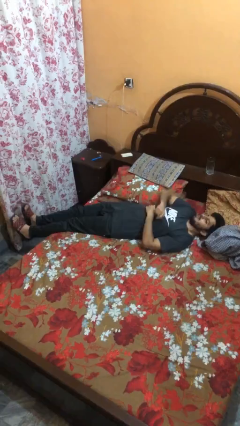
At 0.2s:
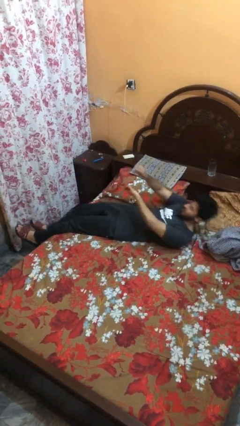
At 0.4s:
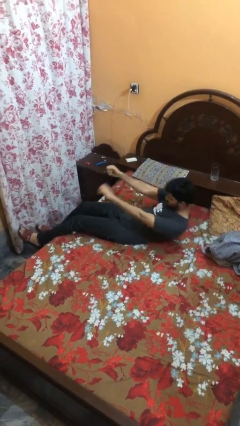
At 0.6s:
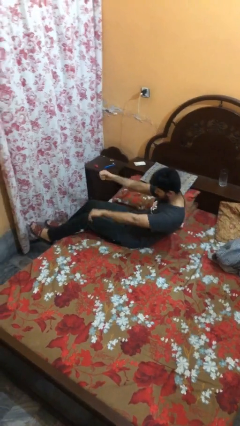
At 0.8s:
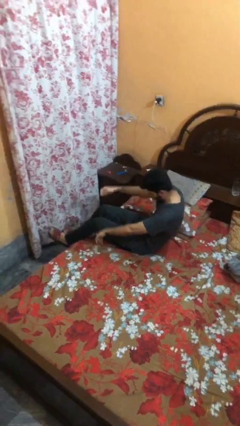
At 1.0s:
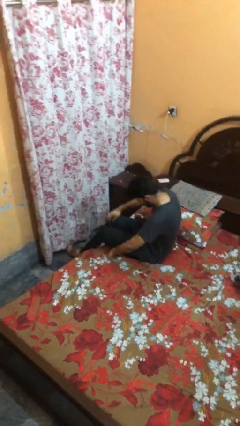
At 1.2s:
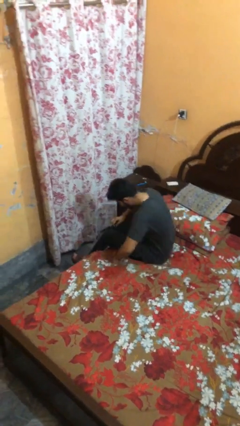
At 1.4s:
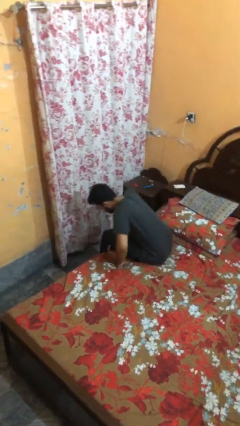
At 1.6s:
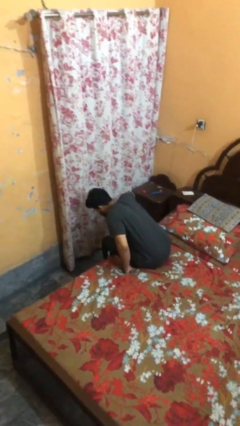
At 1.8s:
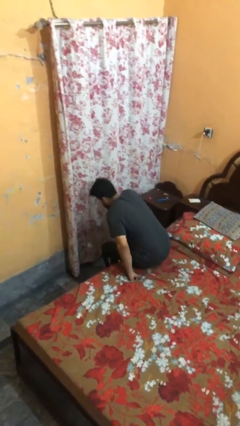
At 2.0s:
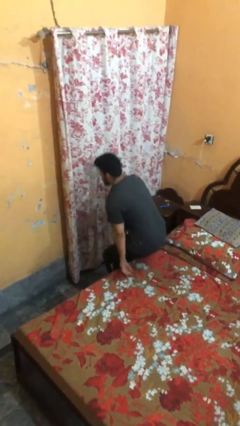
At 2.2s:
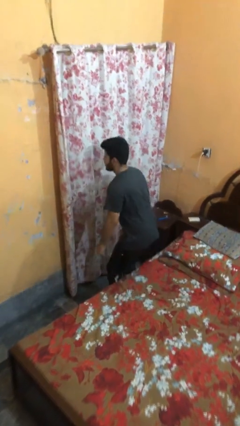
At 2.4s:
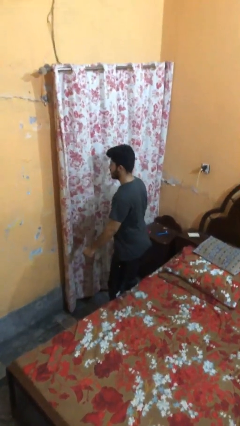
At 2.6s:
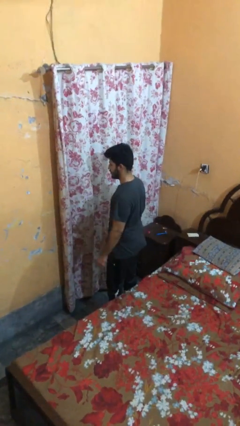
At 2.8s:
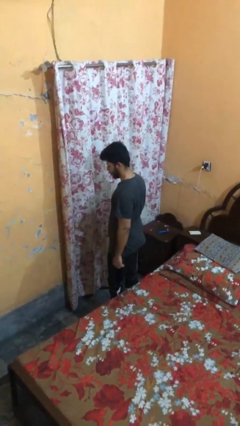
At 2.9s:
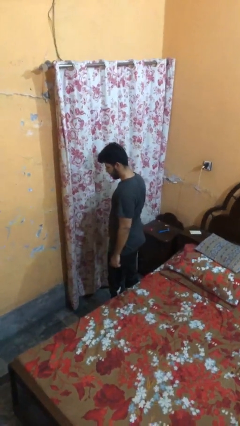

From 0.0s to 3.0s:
person stands up

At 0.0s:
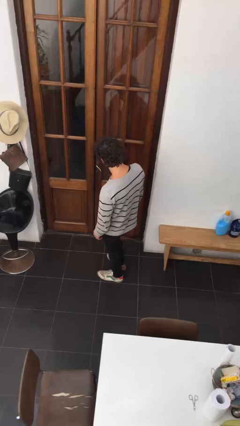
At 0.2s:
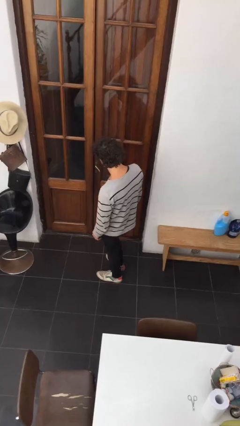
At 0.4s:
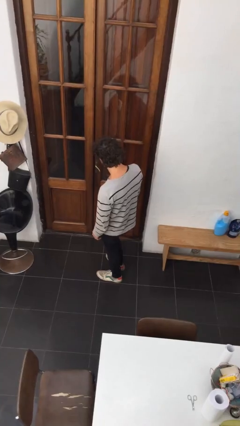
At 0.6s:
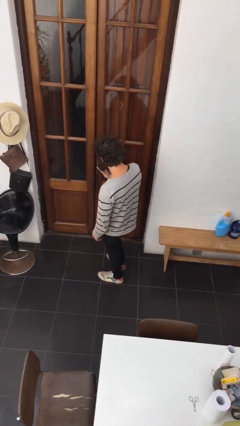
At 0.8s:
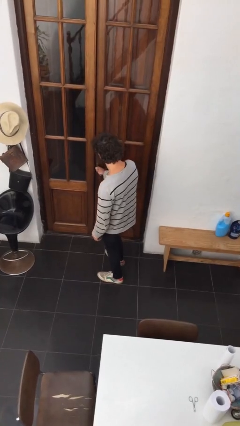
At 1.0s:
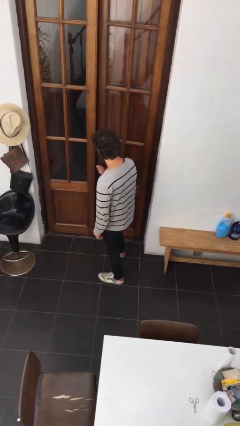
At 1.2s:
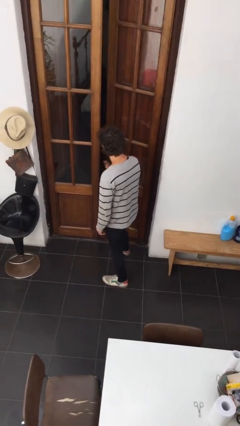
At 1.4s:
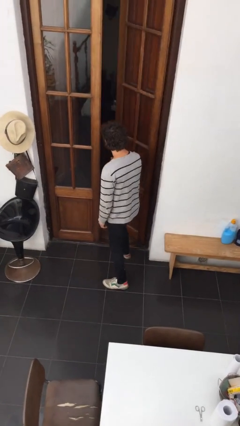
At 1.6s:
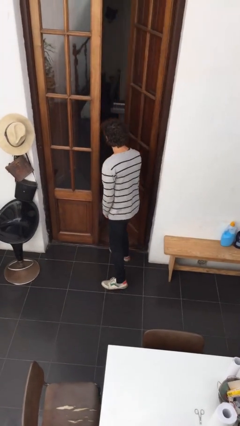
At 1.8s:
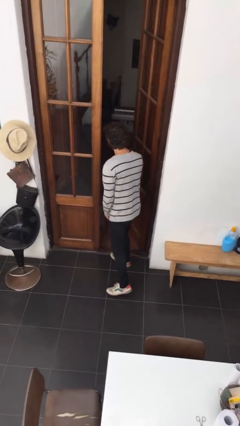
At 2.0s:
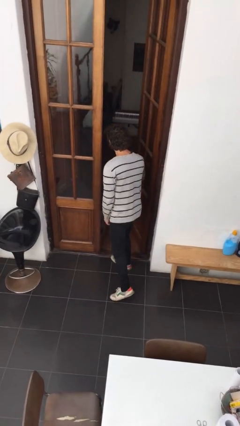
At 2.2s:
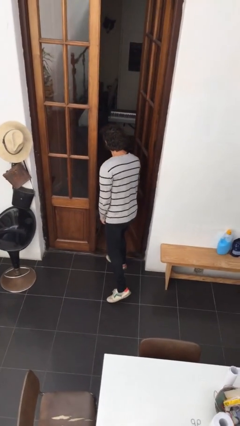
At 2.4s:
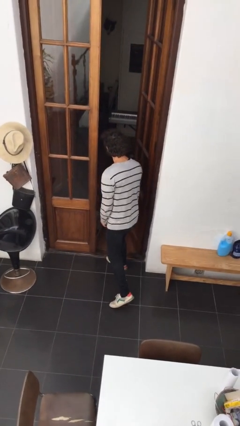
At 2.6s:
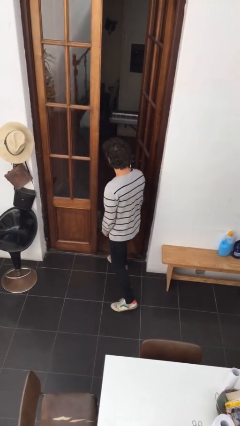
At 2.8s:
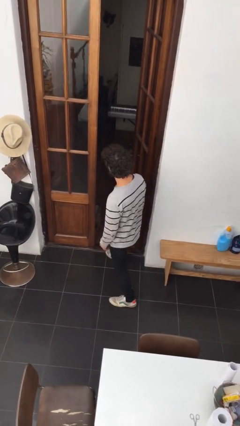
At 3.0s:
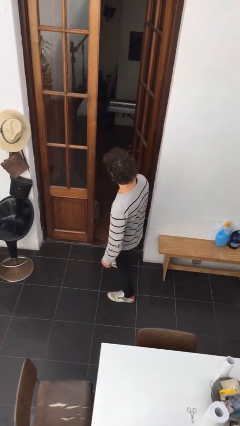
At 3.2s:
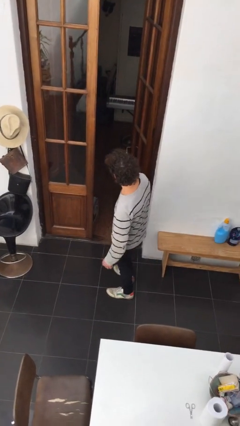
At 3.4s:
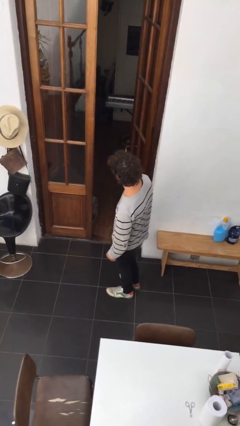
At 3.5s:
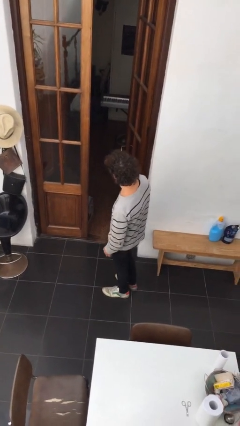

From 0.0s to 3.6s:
person opens facility door

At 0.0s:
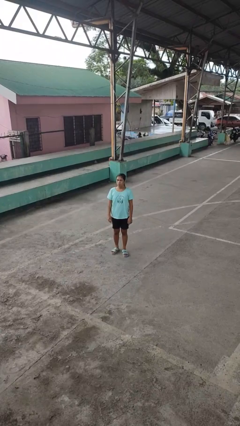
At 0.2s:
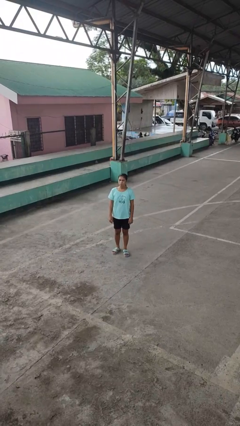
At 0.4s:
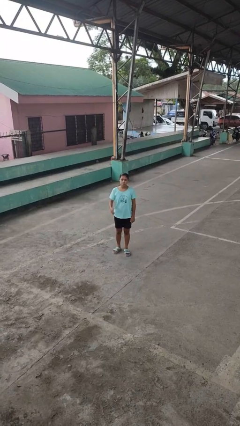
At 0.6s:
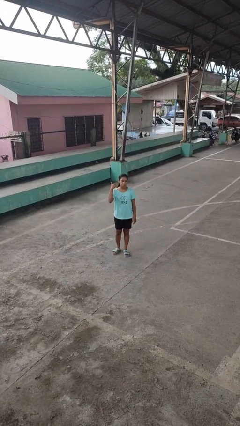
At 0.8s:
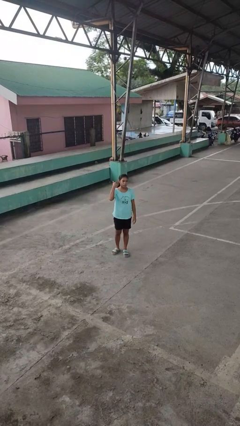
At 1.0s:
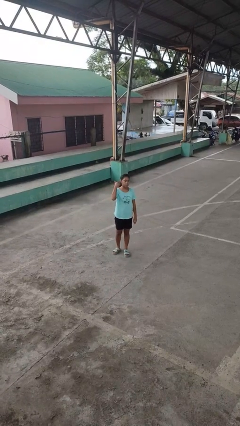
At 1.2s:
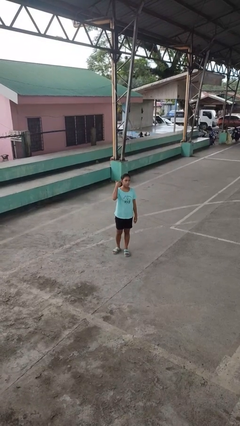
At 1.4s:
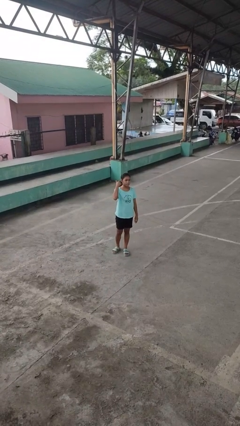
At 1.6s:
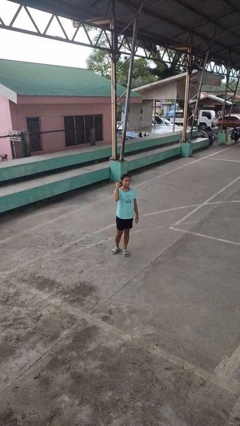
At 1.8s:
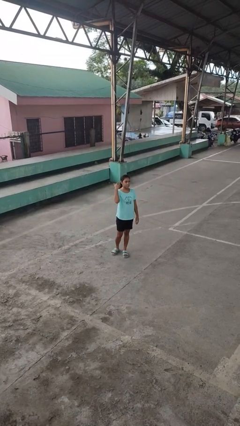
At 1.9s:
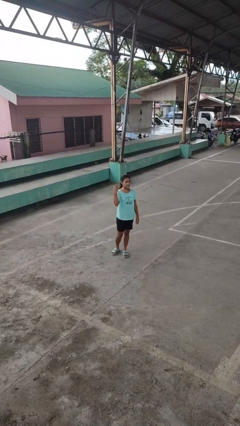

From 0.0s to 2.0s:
person gestures listen closely

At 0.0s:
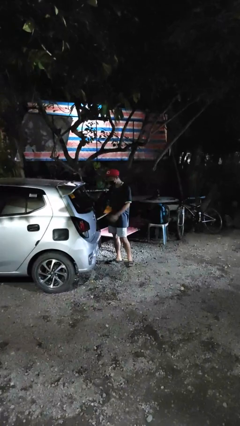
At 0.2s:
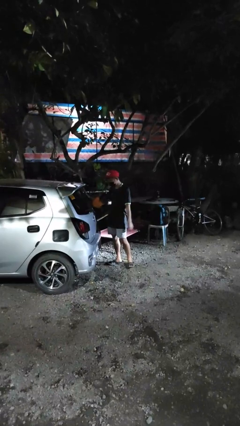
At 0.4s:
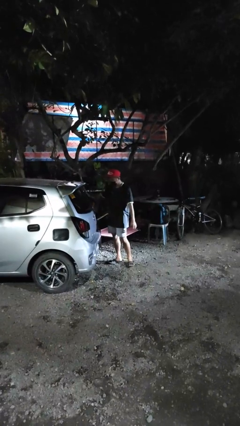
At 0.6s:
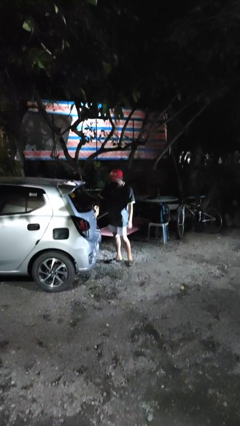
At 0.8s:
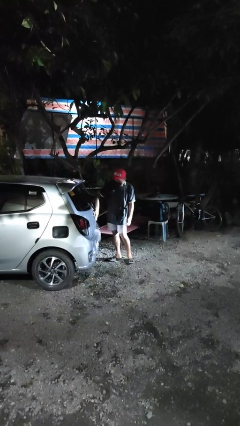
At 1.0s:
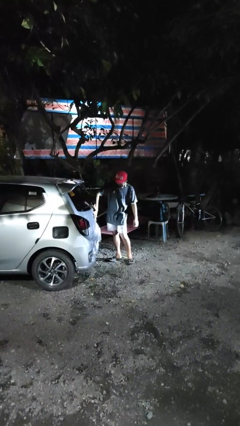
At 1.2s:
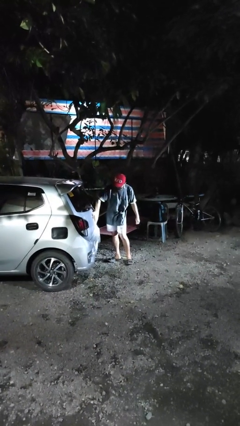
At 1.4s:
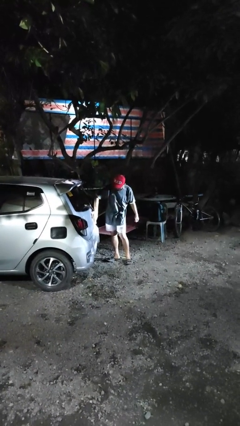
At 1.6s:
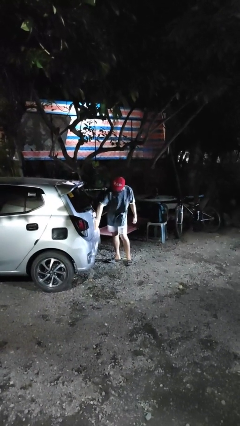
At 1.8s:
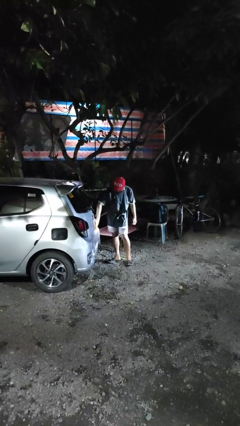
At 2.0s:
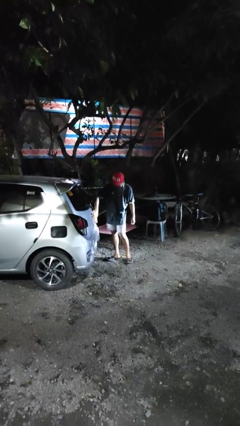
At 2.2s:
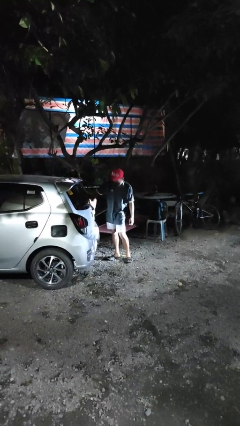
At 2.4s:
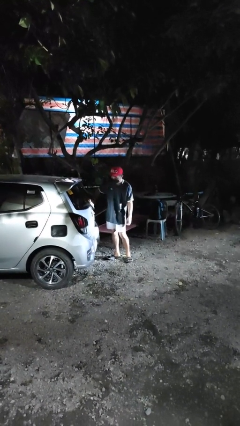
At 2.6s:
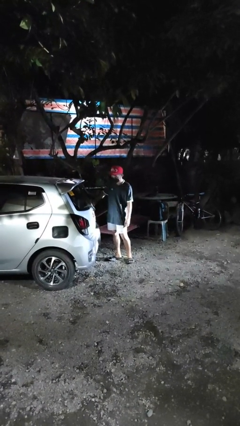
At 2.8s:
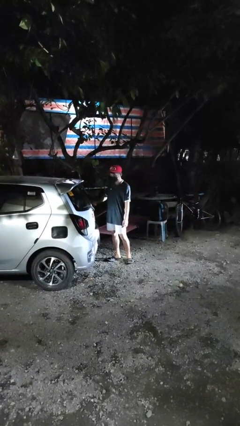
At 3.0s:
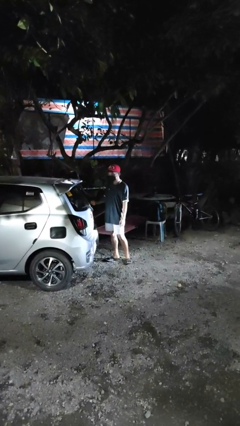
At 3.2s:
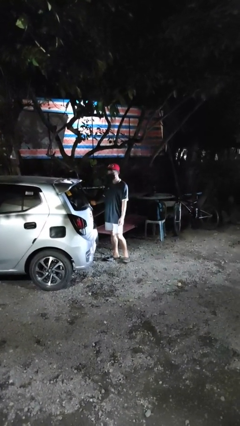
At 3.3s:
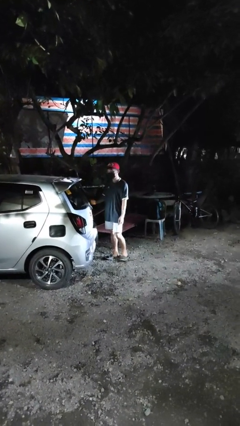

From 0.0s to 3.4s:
person polishes car with rag

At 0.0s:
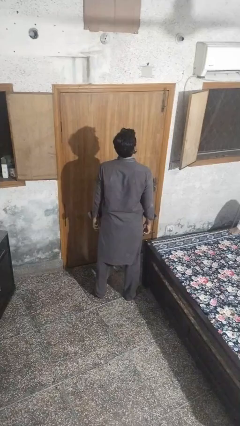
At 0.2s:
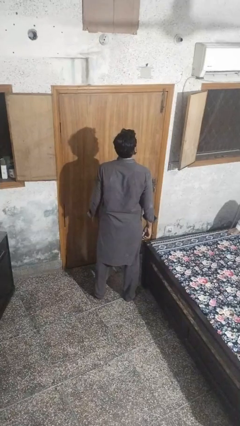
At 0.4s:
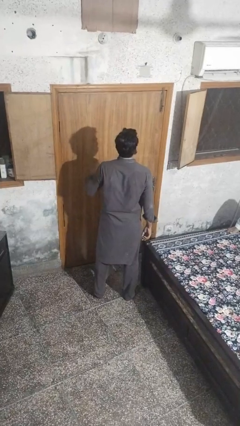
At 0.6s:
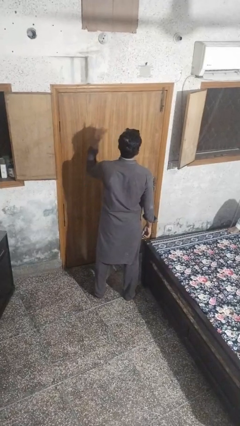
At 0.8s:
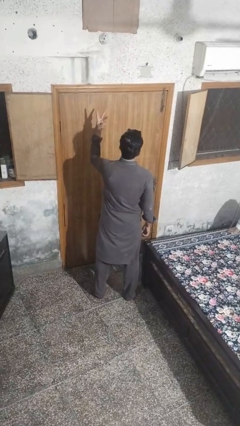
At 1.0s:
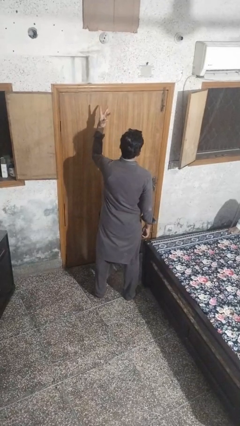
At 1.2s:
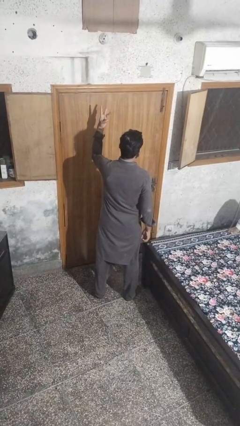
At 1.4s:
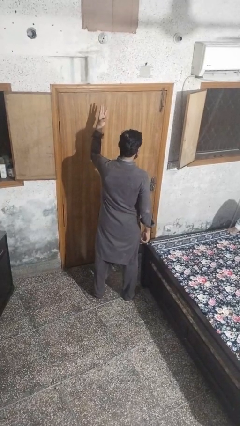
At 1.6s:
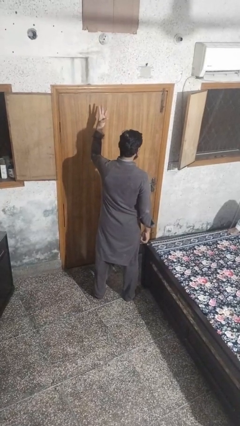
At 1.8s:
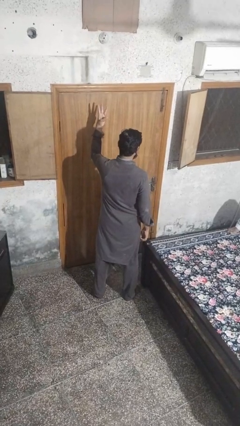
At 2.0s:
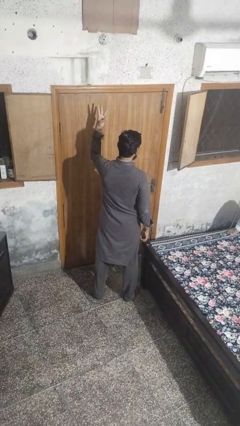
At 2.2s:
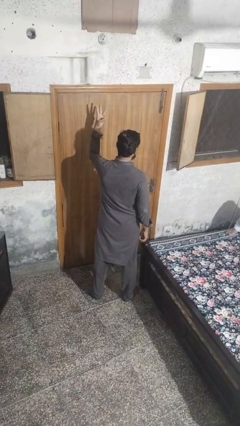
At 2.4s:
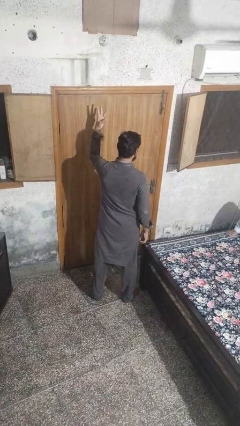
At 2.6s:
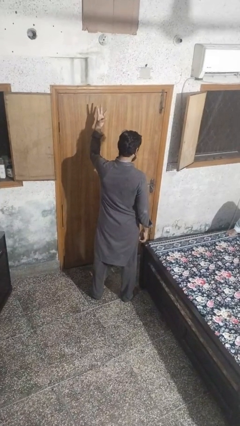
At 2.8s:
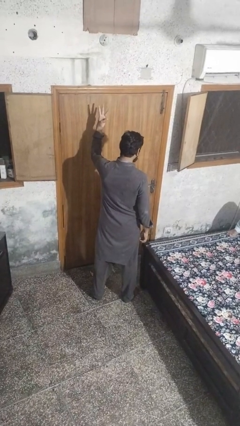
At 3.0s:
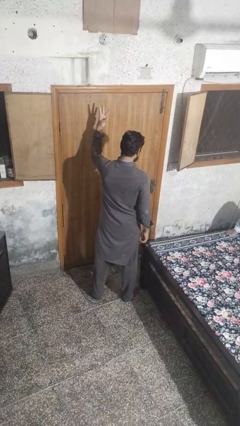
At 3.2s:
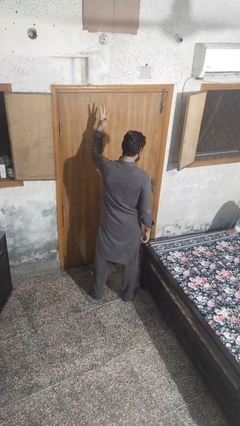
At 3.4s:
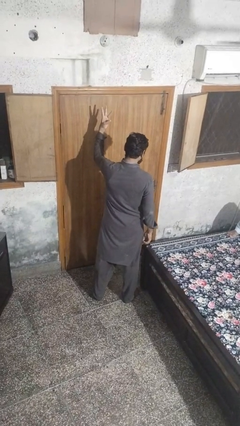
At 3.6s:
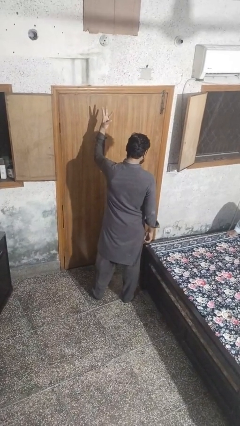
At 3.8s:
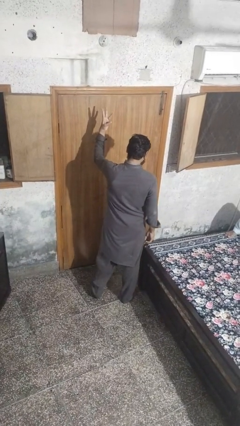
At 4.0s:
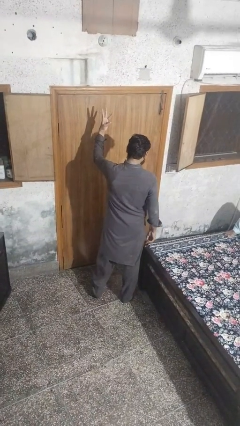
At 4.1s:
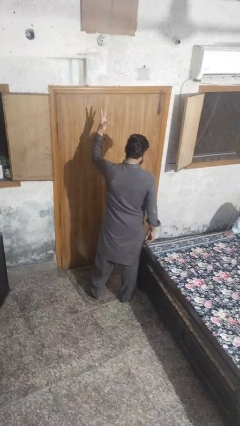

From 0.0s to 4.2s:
person gestures number three

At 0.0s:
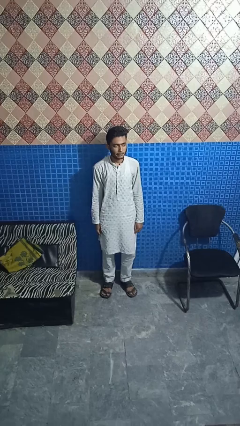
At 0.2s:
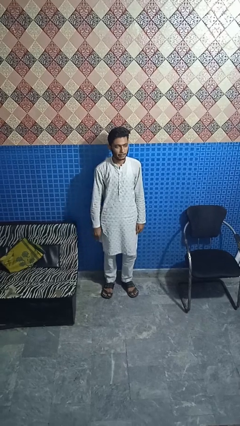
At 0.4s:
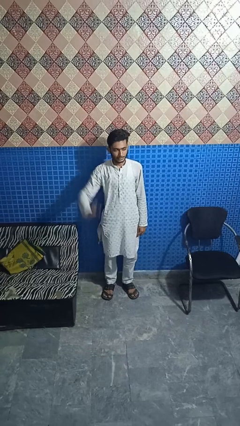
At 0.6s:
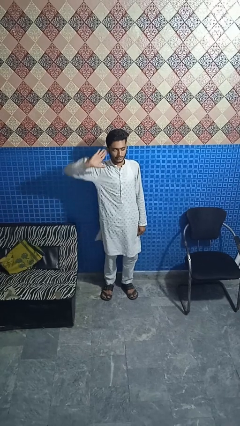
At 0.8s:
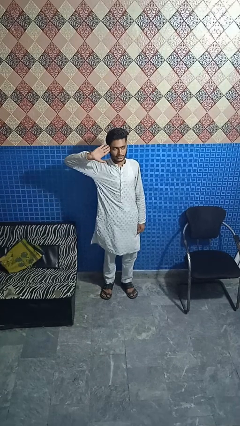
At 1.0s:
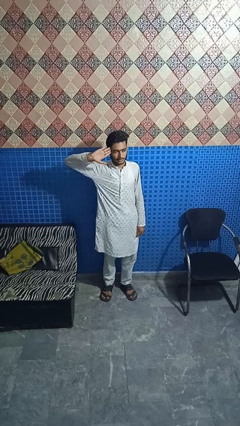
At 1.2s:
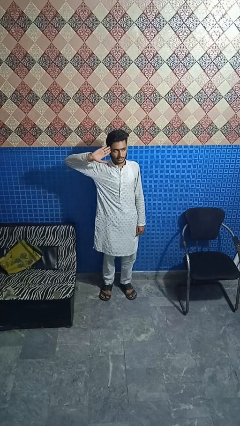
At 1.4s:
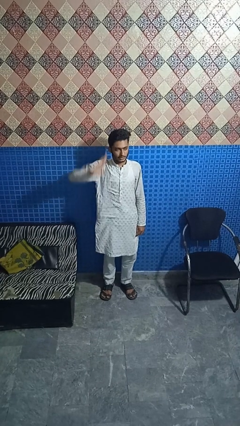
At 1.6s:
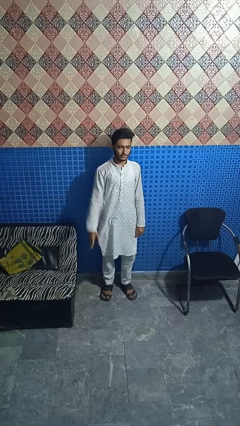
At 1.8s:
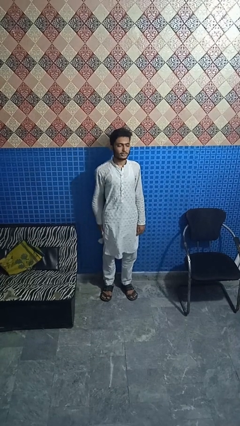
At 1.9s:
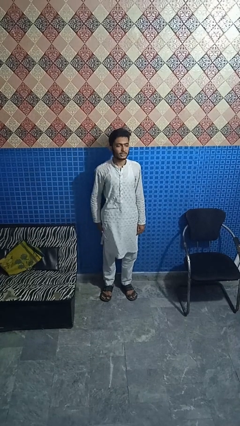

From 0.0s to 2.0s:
person salutes
